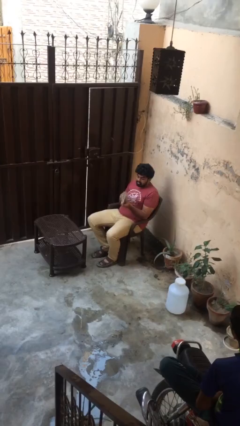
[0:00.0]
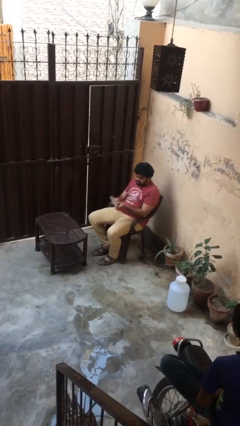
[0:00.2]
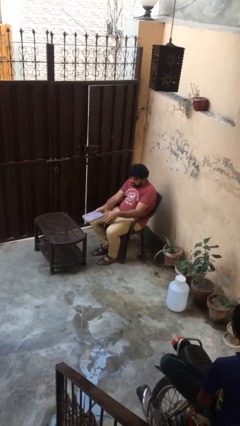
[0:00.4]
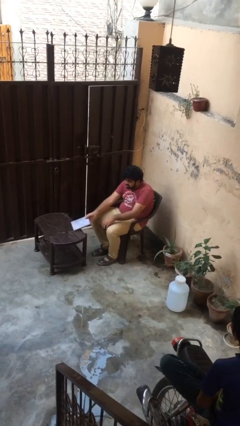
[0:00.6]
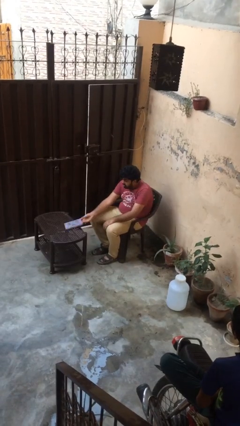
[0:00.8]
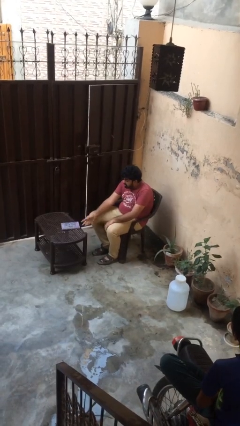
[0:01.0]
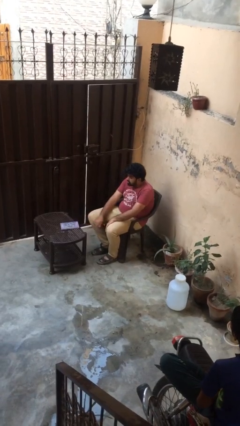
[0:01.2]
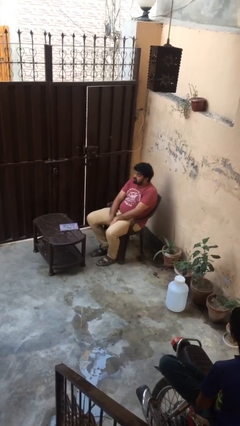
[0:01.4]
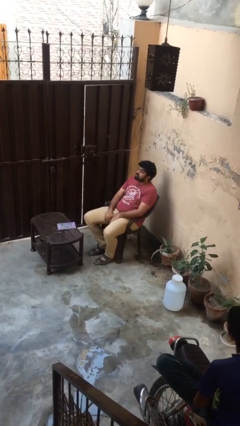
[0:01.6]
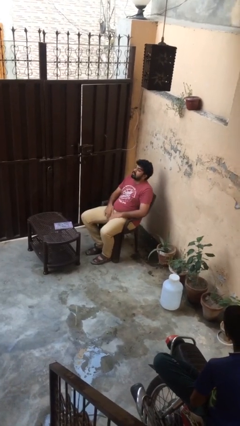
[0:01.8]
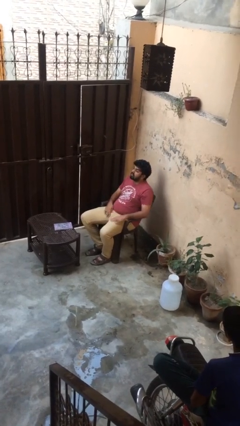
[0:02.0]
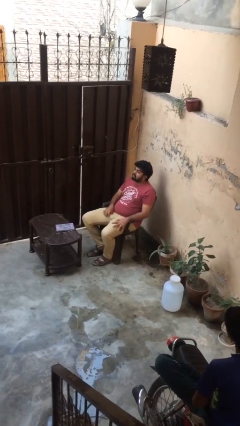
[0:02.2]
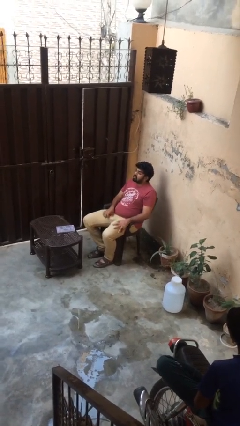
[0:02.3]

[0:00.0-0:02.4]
person puts down object on table

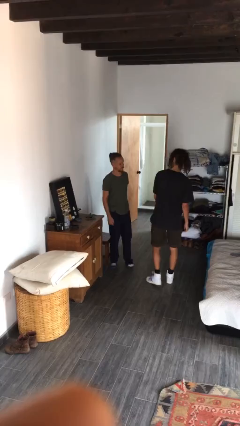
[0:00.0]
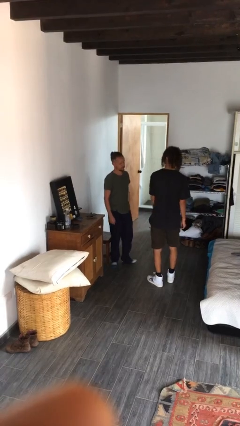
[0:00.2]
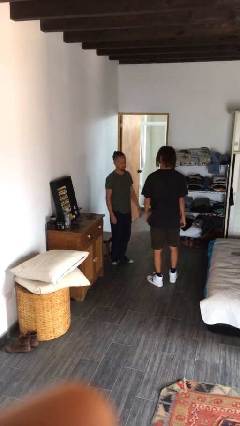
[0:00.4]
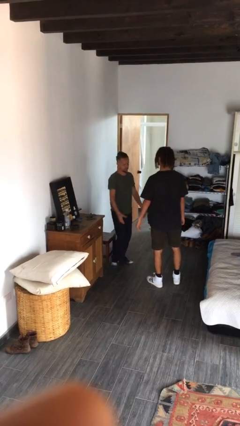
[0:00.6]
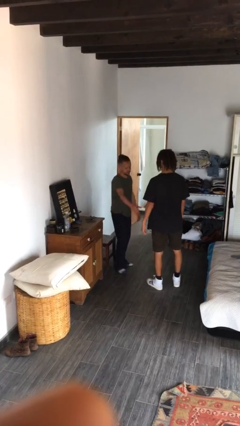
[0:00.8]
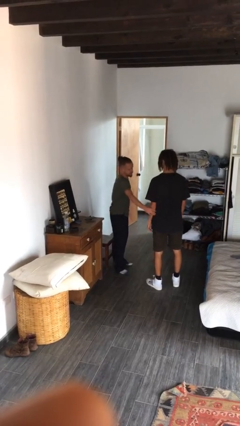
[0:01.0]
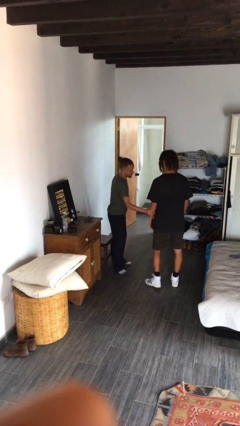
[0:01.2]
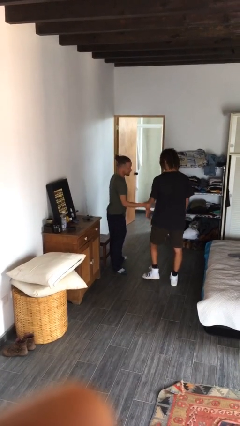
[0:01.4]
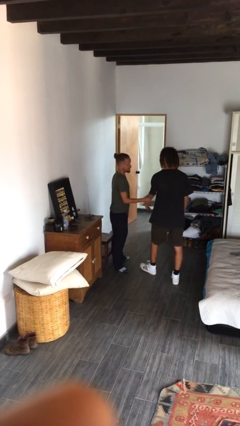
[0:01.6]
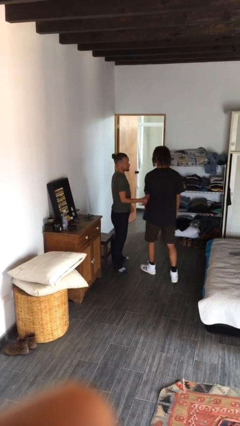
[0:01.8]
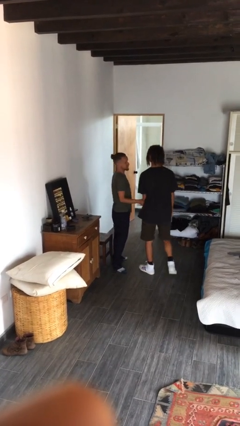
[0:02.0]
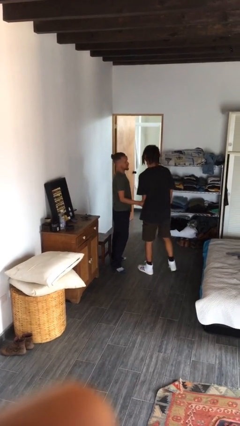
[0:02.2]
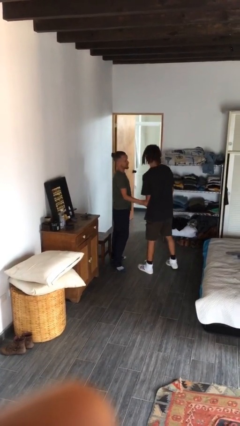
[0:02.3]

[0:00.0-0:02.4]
person grabs person by forearm

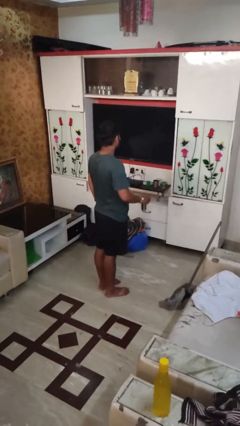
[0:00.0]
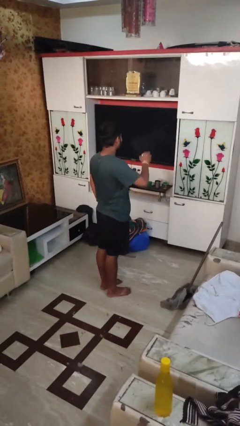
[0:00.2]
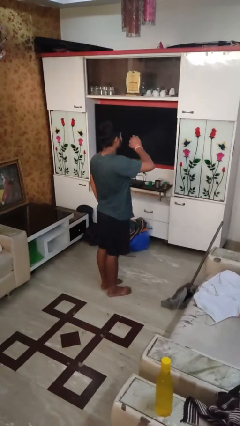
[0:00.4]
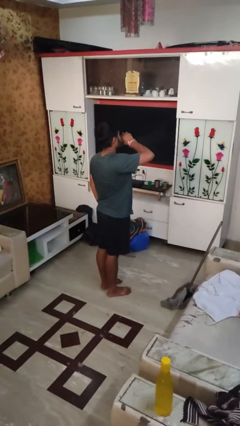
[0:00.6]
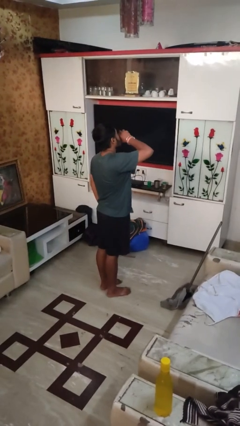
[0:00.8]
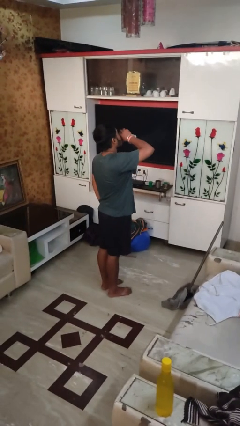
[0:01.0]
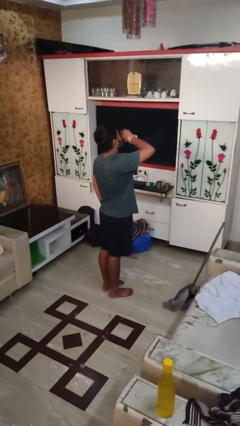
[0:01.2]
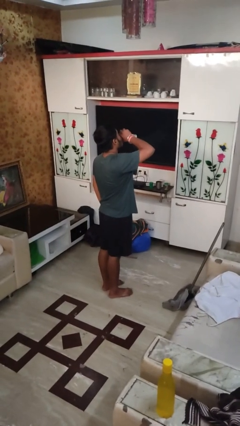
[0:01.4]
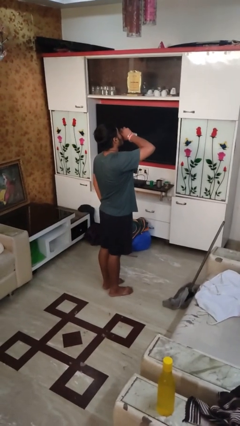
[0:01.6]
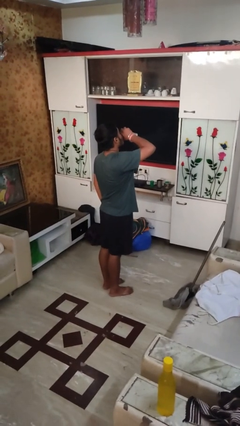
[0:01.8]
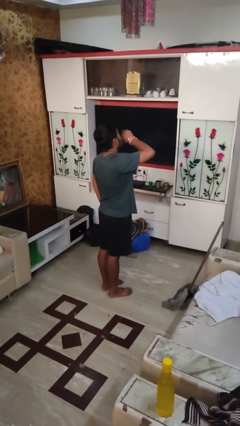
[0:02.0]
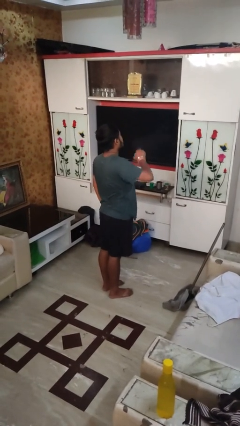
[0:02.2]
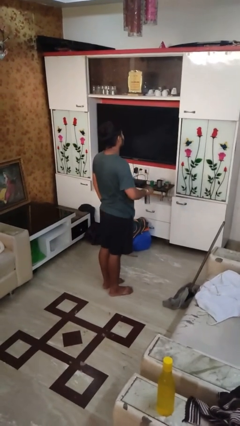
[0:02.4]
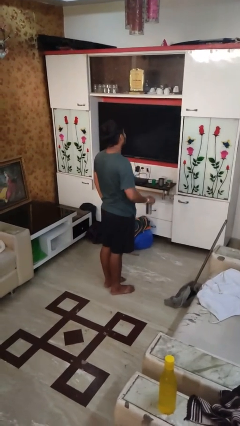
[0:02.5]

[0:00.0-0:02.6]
person drinks from beverage can

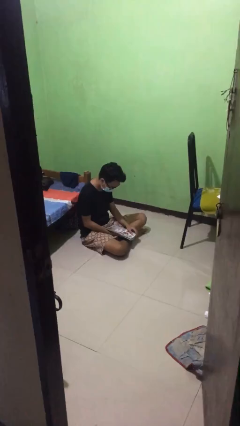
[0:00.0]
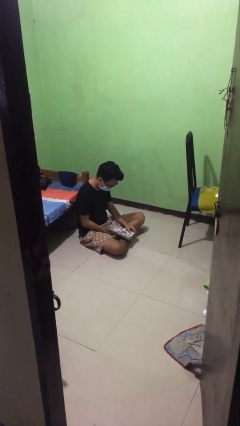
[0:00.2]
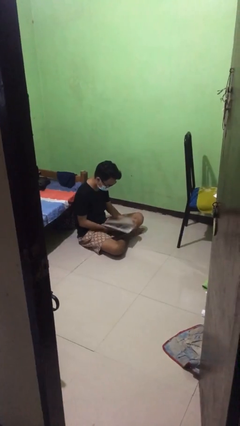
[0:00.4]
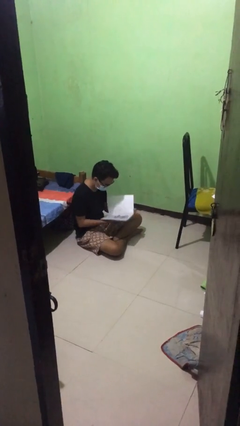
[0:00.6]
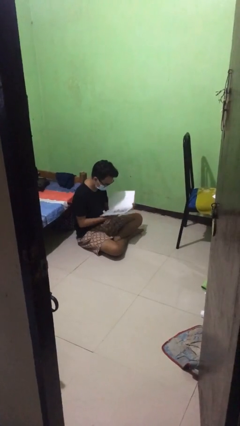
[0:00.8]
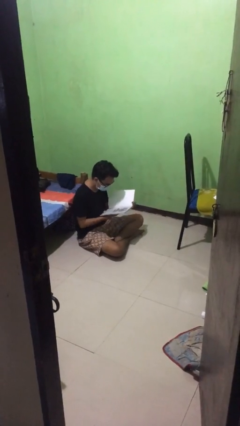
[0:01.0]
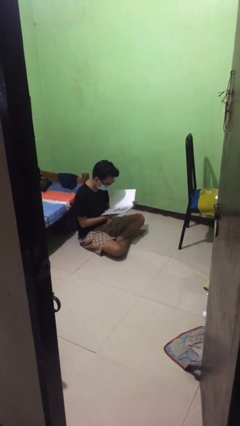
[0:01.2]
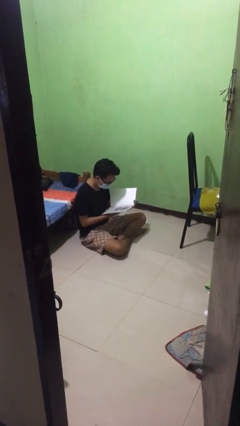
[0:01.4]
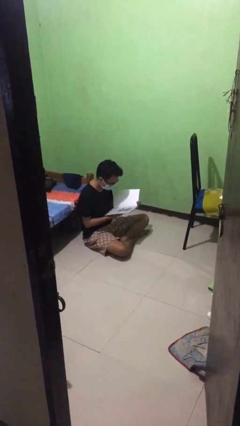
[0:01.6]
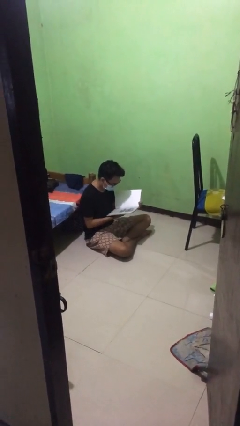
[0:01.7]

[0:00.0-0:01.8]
person reads document

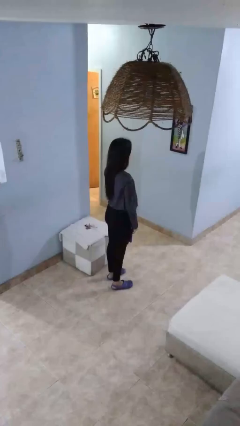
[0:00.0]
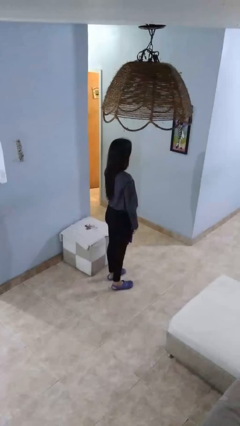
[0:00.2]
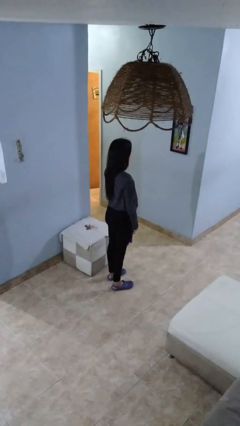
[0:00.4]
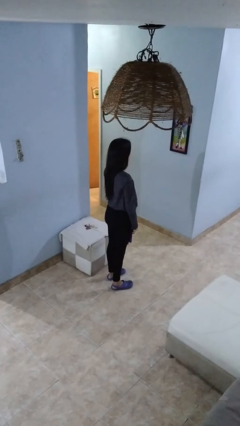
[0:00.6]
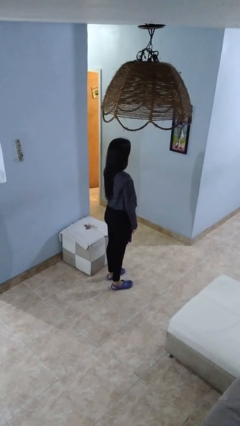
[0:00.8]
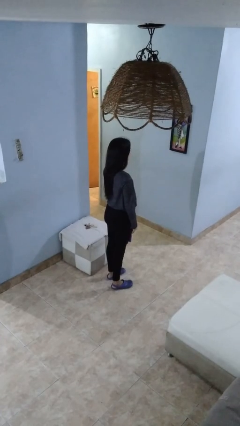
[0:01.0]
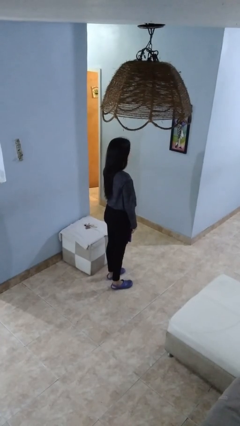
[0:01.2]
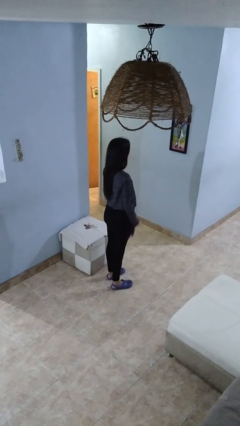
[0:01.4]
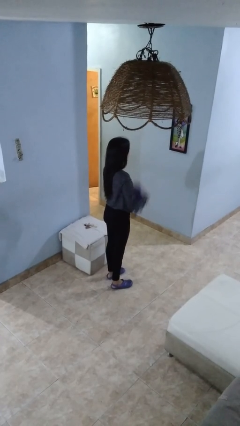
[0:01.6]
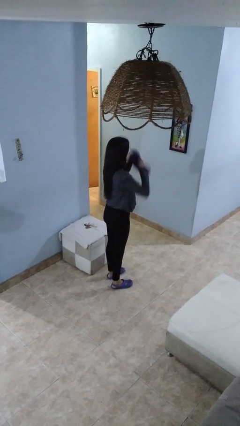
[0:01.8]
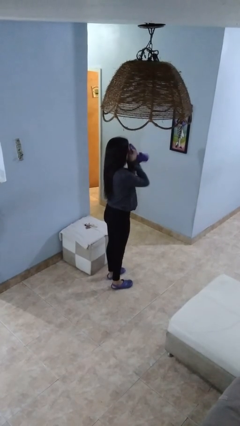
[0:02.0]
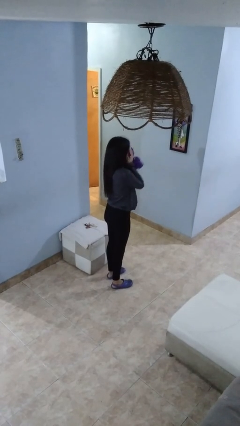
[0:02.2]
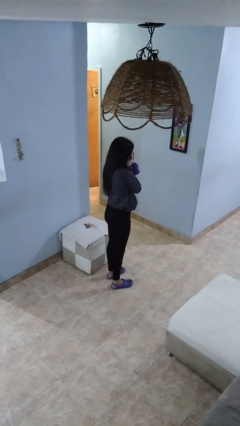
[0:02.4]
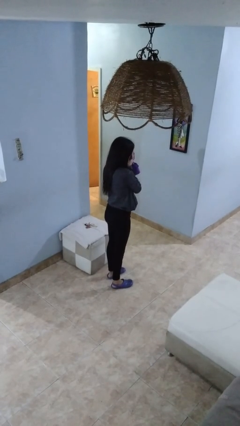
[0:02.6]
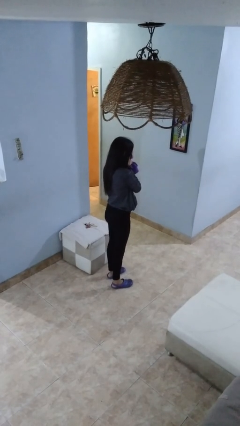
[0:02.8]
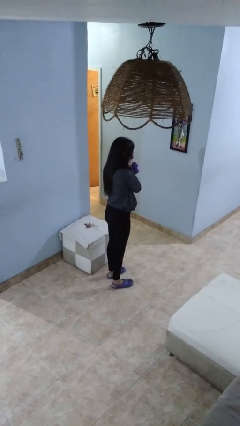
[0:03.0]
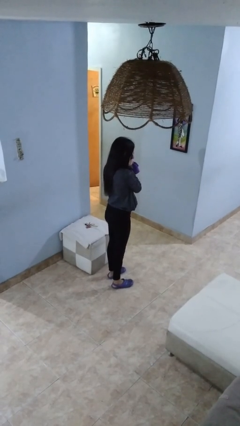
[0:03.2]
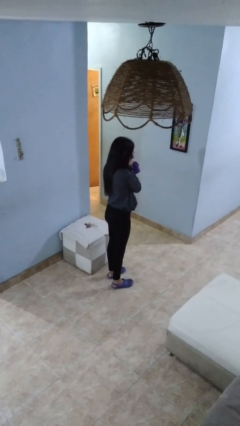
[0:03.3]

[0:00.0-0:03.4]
person blows nose

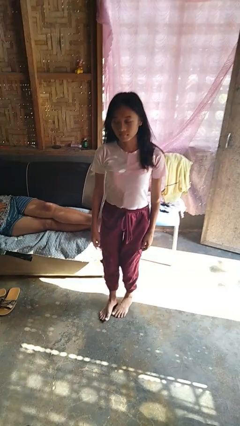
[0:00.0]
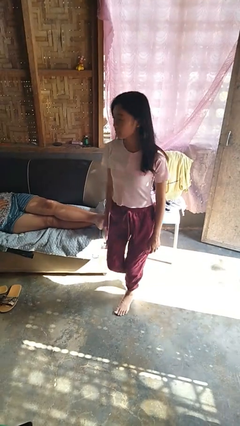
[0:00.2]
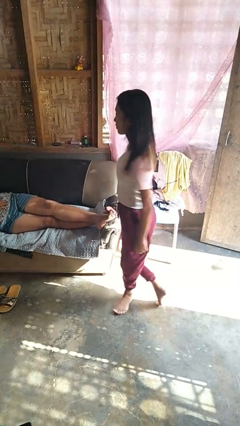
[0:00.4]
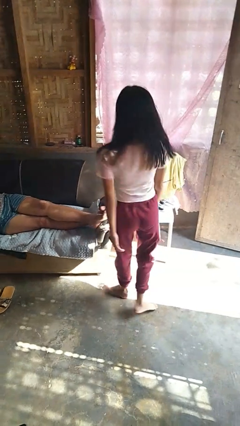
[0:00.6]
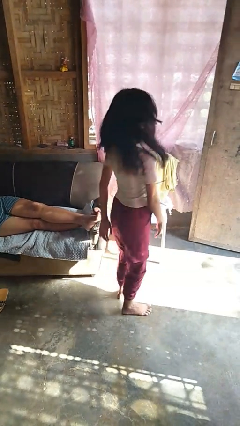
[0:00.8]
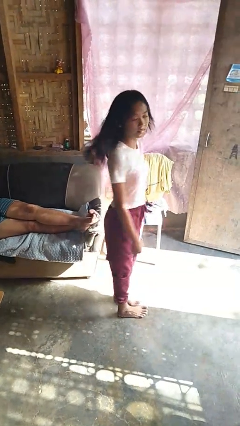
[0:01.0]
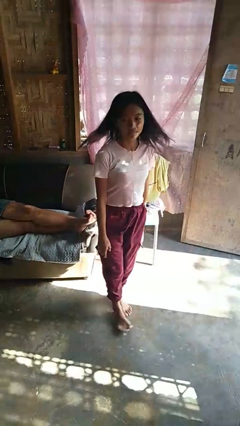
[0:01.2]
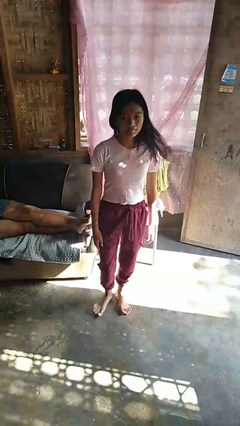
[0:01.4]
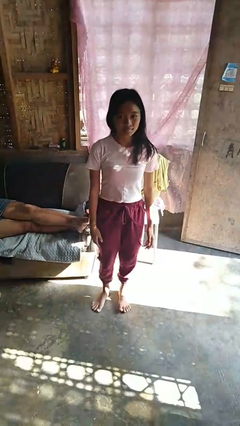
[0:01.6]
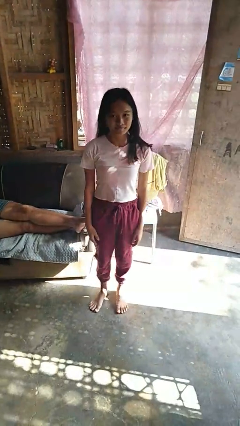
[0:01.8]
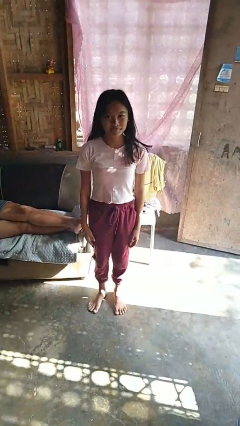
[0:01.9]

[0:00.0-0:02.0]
person twirls

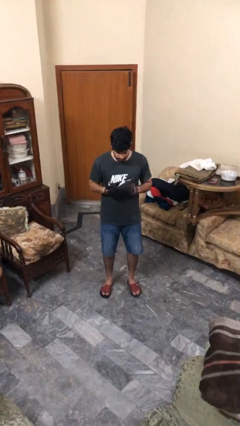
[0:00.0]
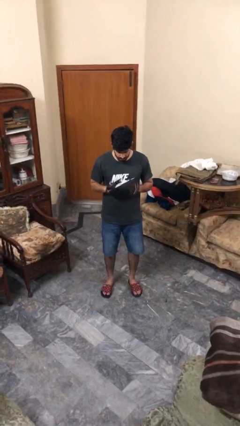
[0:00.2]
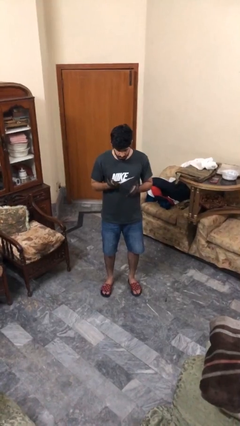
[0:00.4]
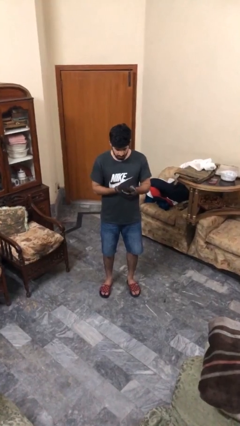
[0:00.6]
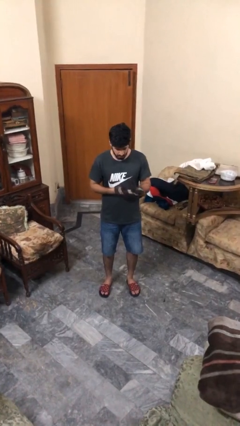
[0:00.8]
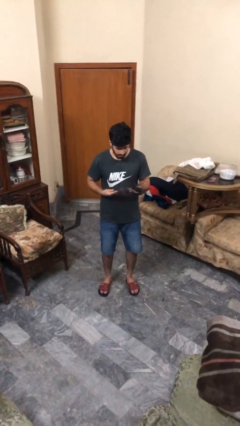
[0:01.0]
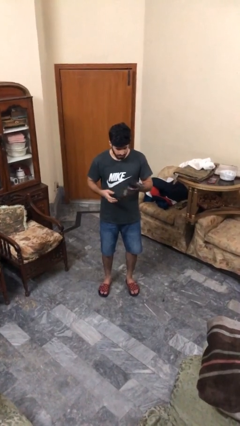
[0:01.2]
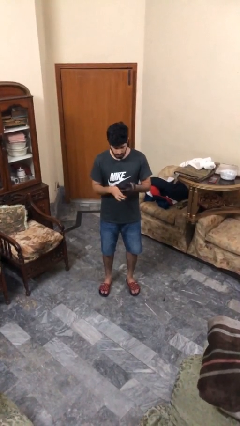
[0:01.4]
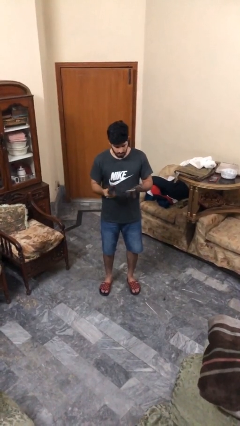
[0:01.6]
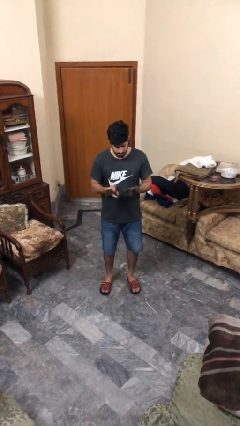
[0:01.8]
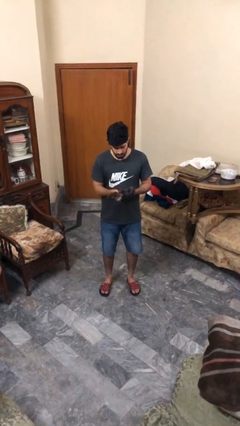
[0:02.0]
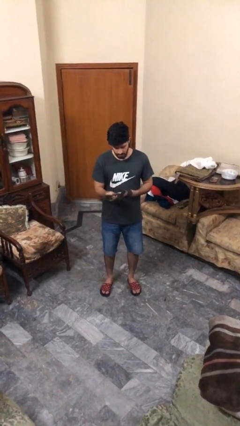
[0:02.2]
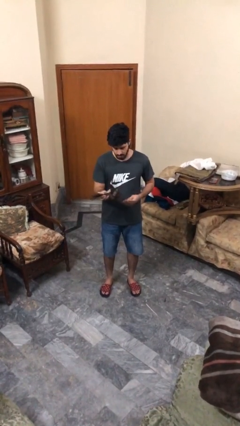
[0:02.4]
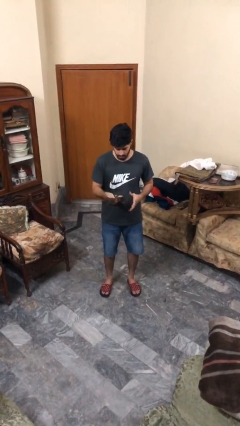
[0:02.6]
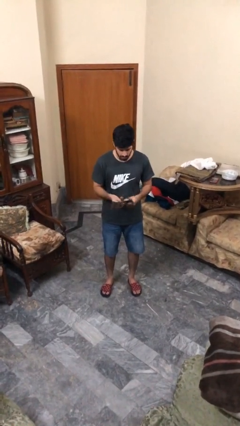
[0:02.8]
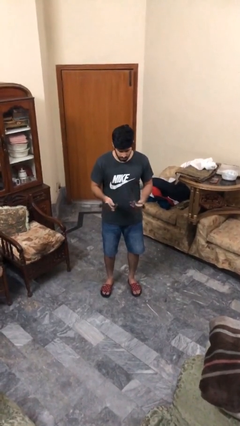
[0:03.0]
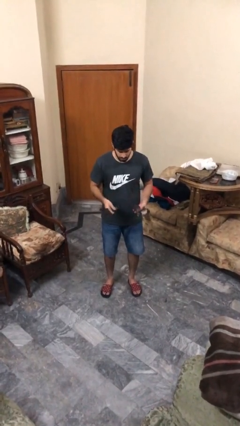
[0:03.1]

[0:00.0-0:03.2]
person takes off gloves
